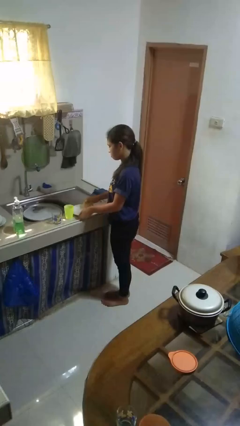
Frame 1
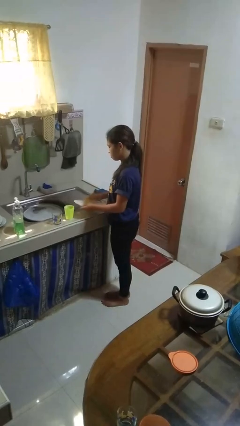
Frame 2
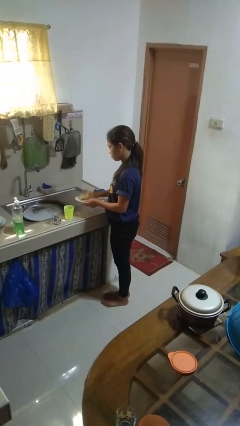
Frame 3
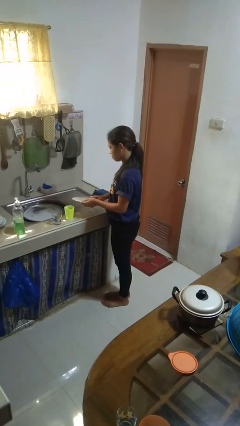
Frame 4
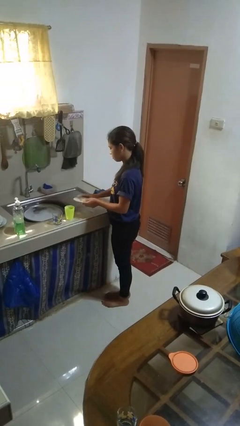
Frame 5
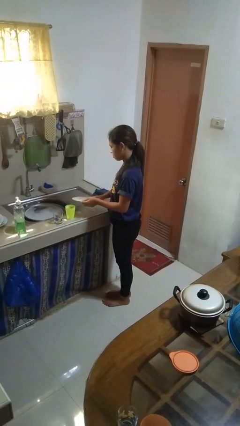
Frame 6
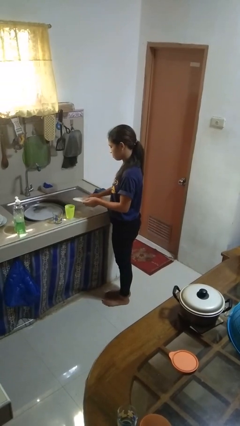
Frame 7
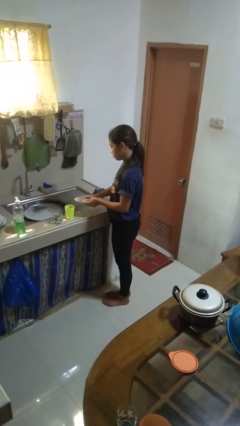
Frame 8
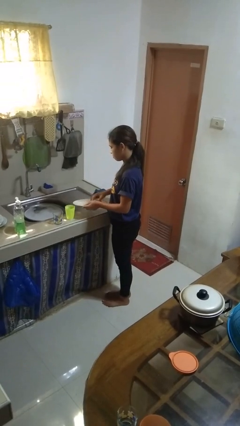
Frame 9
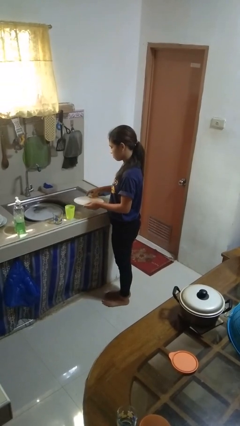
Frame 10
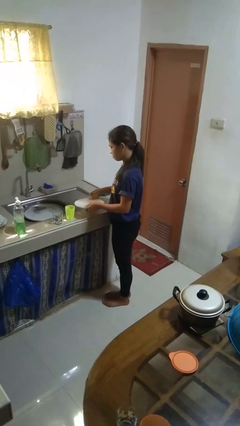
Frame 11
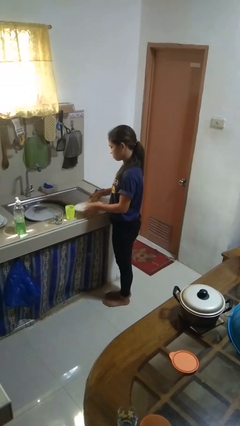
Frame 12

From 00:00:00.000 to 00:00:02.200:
person washes dish

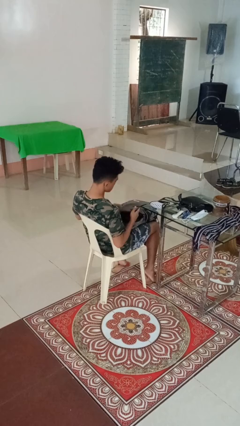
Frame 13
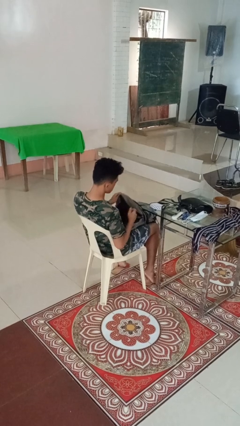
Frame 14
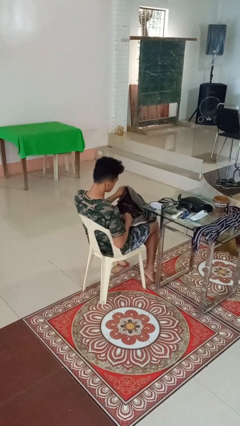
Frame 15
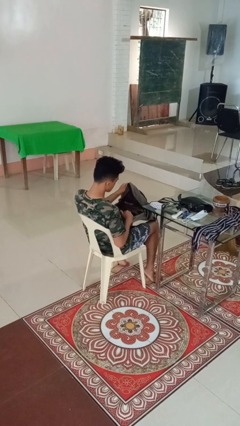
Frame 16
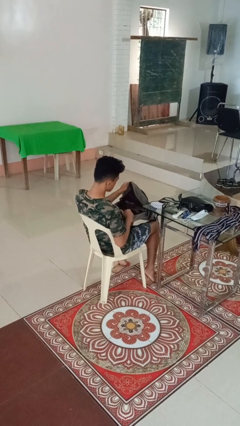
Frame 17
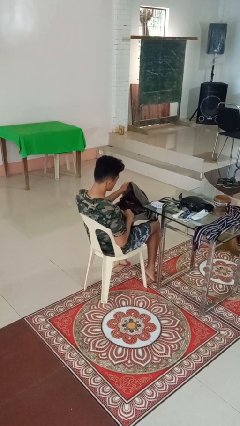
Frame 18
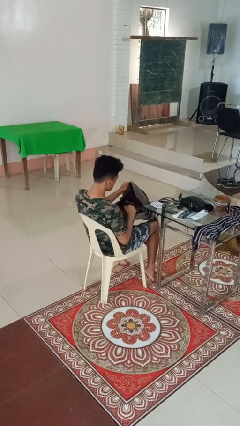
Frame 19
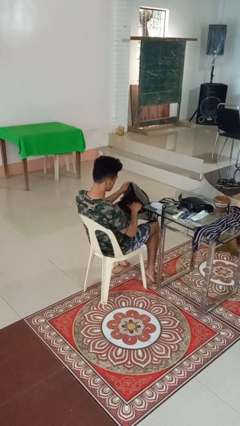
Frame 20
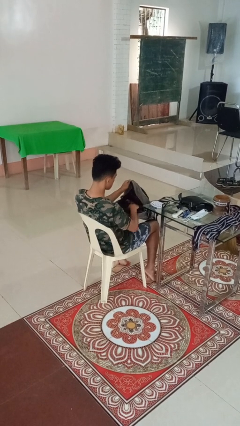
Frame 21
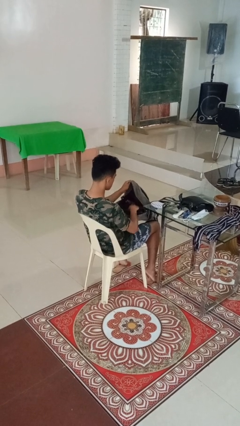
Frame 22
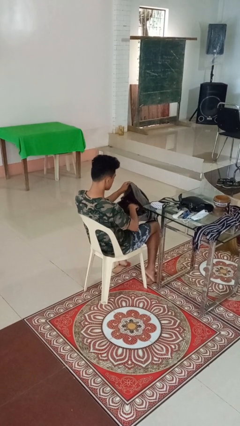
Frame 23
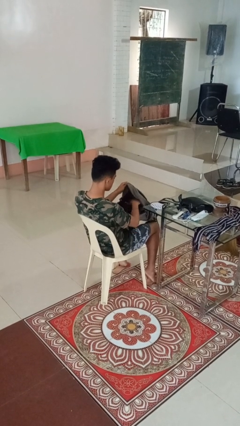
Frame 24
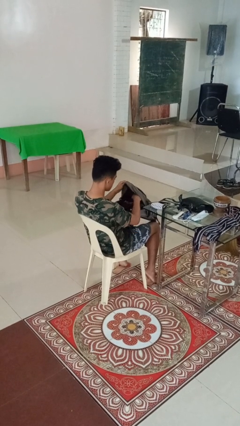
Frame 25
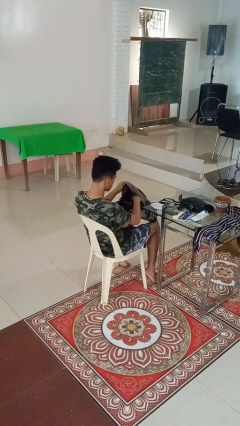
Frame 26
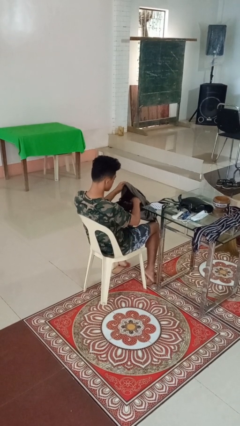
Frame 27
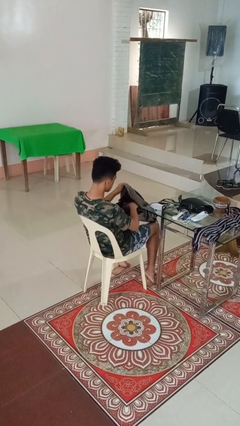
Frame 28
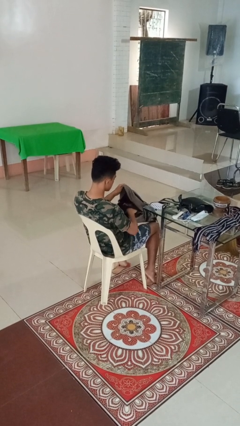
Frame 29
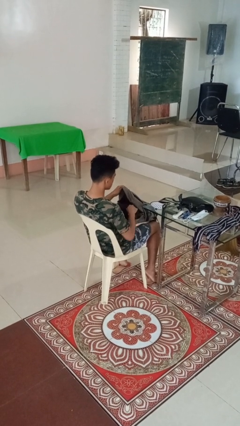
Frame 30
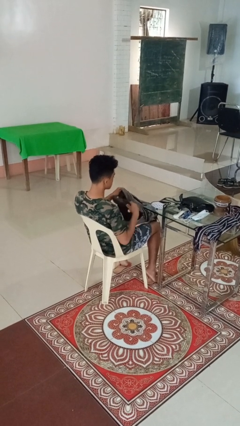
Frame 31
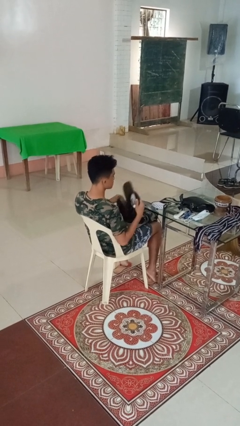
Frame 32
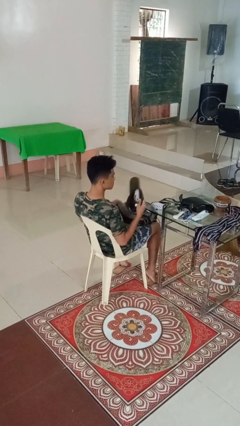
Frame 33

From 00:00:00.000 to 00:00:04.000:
person searches in backpack

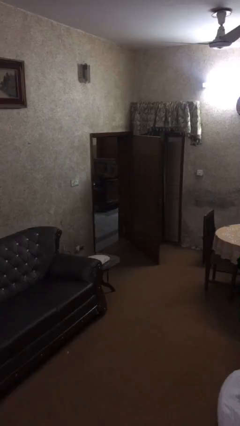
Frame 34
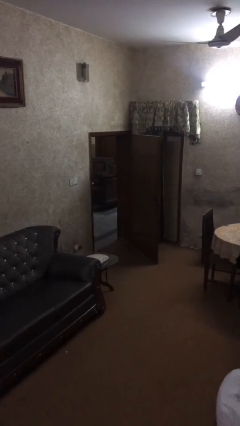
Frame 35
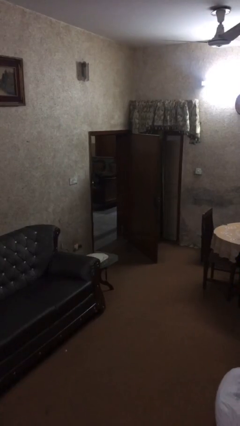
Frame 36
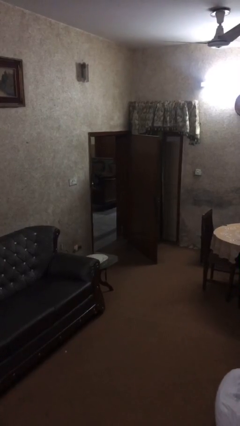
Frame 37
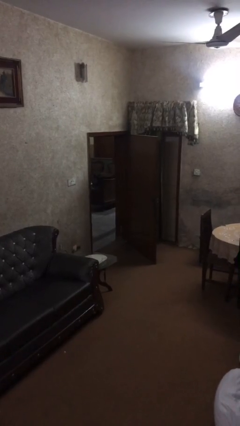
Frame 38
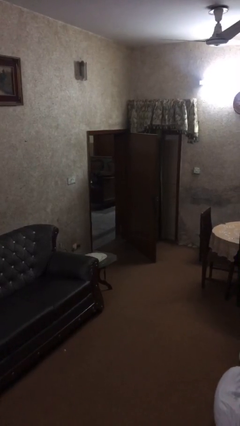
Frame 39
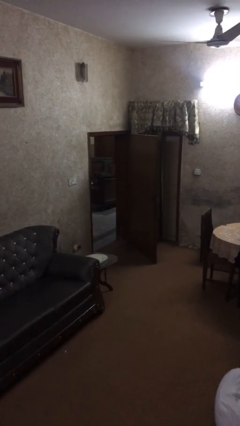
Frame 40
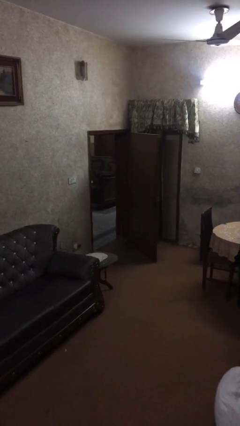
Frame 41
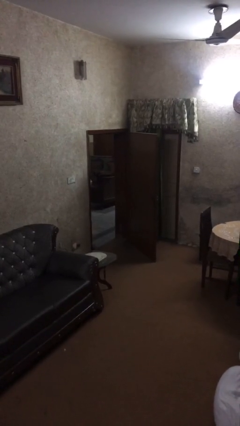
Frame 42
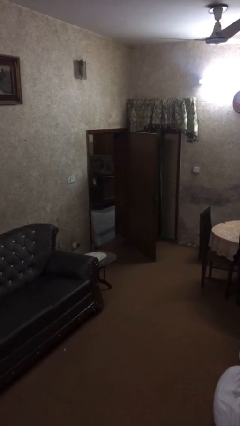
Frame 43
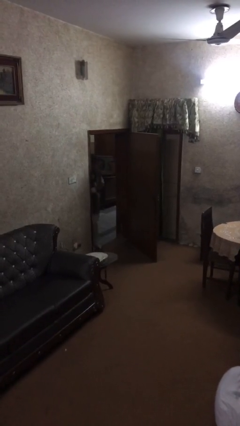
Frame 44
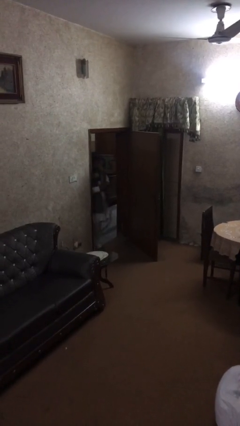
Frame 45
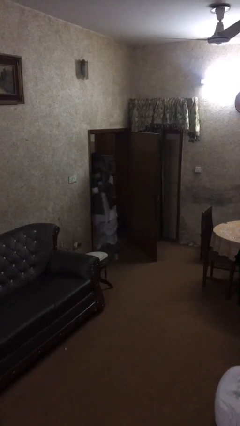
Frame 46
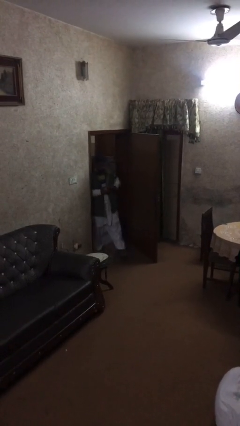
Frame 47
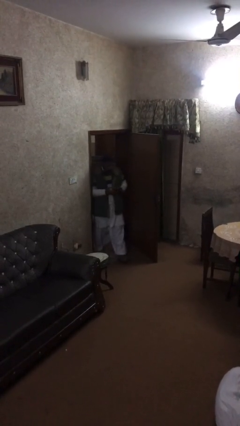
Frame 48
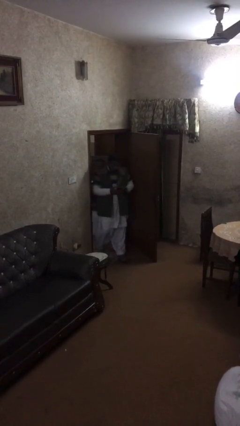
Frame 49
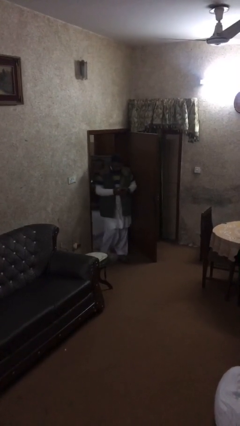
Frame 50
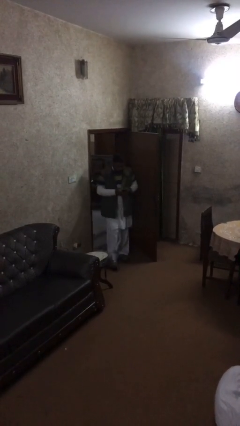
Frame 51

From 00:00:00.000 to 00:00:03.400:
person enters scene through structure

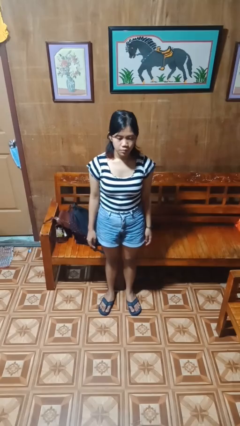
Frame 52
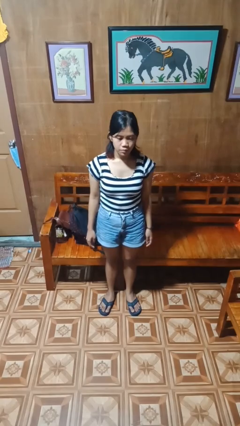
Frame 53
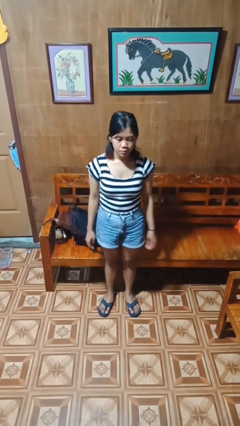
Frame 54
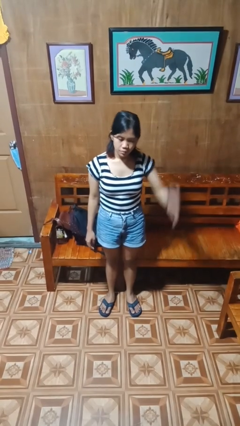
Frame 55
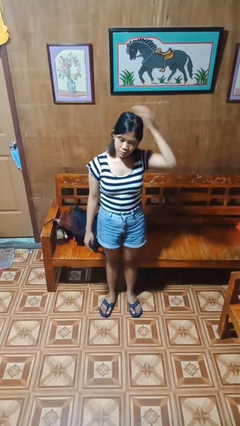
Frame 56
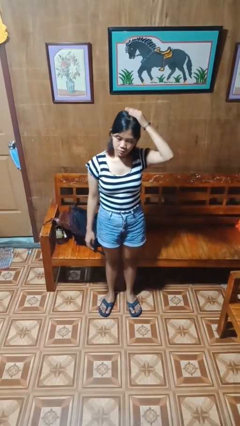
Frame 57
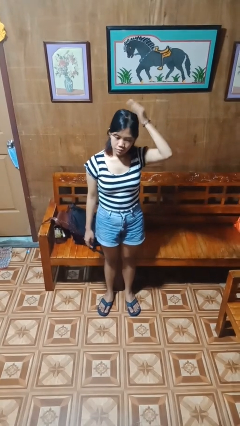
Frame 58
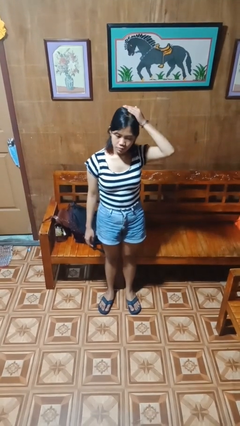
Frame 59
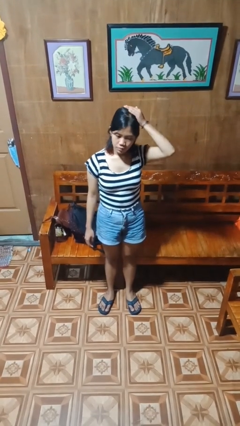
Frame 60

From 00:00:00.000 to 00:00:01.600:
person pats head

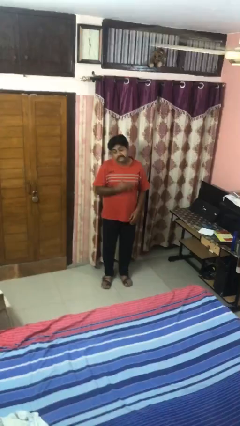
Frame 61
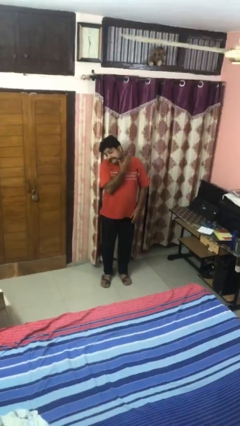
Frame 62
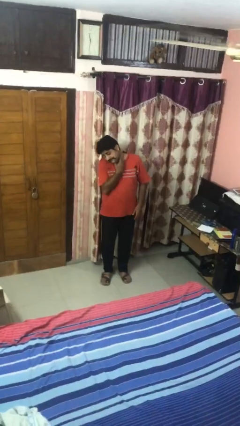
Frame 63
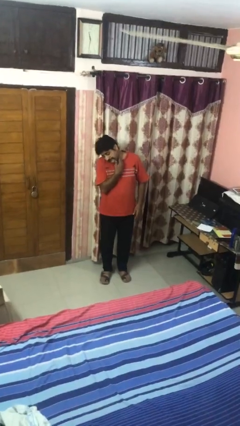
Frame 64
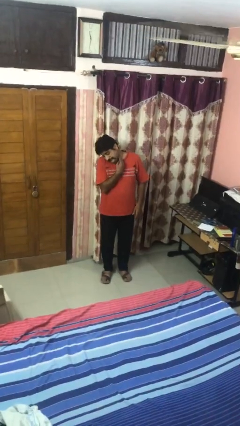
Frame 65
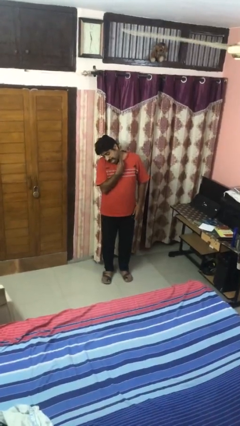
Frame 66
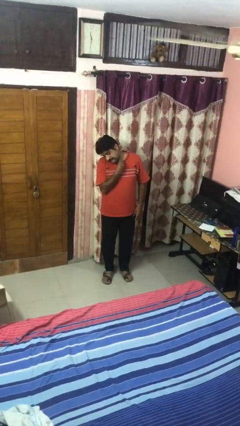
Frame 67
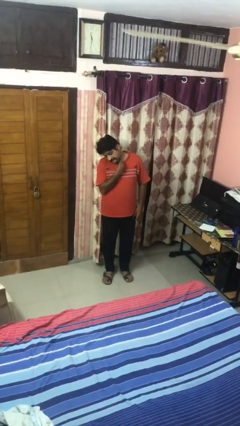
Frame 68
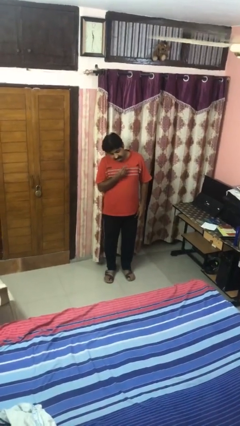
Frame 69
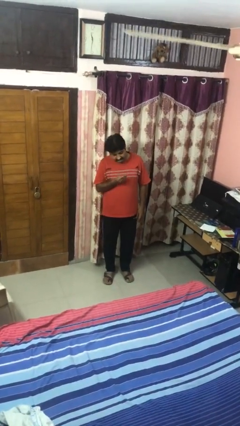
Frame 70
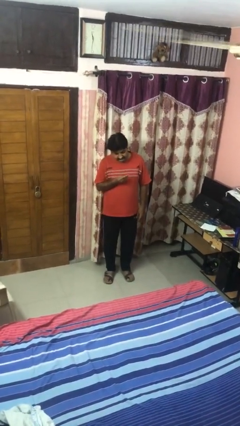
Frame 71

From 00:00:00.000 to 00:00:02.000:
person swats bug

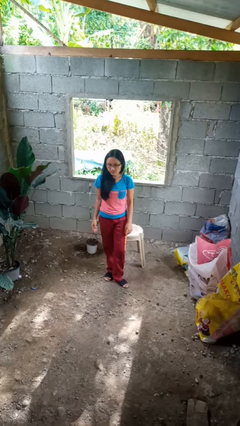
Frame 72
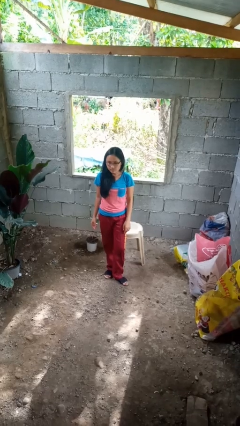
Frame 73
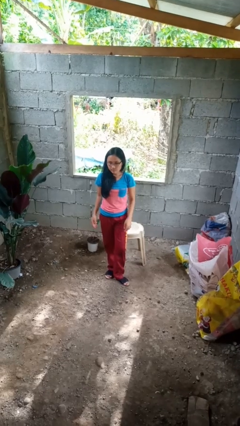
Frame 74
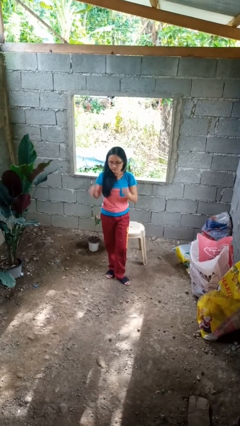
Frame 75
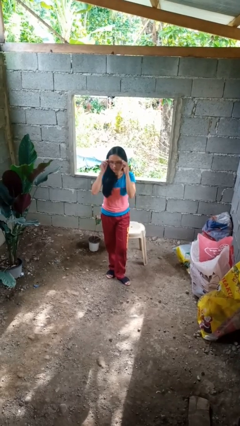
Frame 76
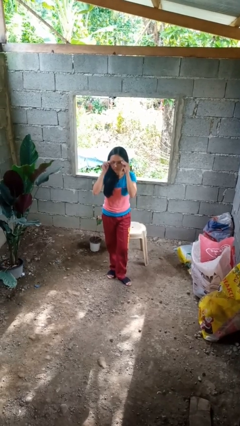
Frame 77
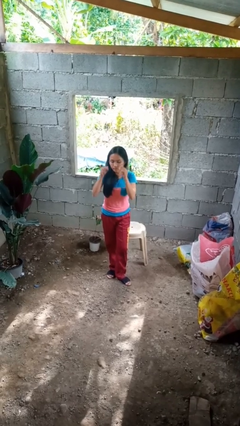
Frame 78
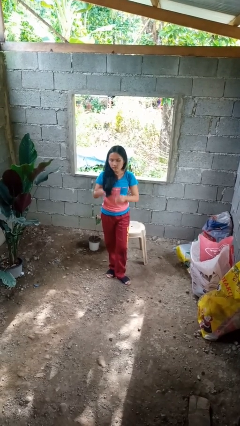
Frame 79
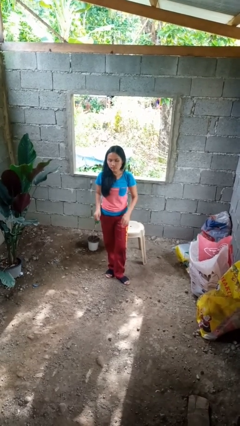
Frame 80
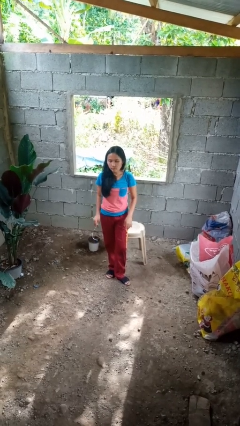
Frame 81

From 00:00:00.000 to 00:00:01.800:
person takes off glasses

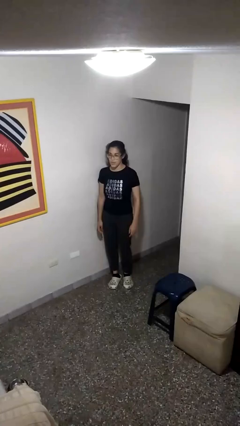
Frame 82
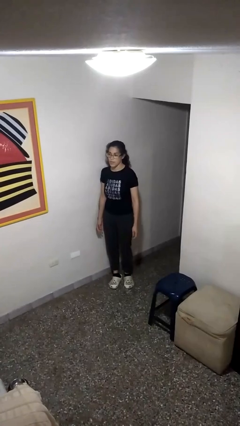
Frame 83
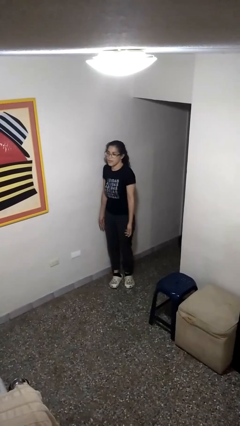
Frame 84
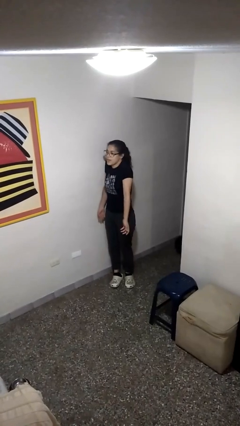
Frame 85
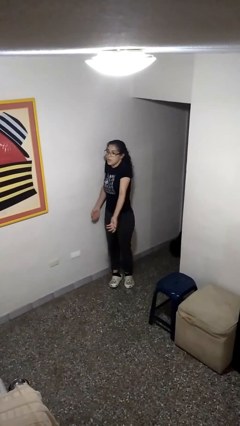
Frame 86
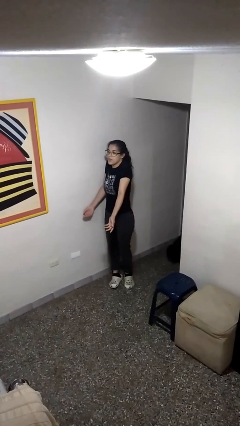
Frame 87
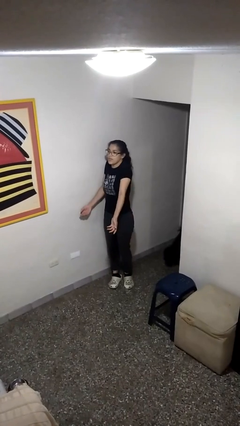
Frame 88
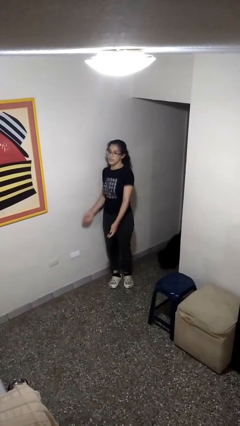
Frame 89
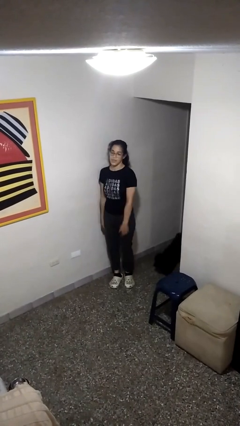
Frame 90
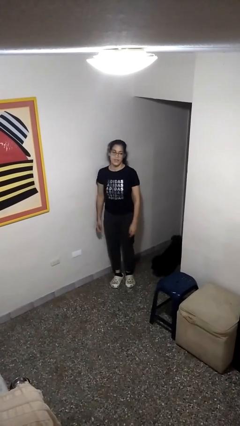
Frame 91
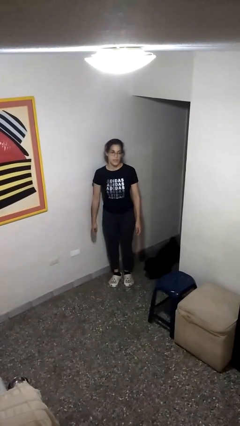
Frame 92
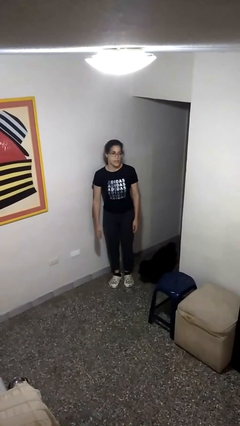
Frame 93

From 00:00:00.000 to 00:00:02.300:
person shrugs
